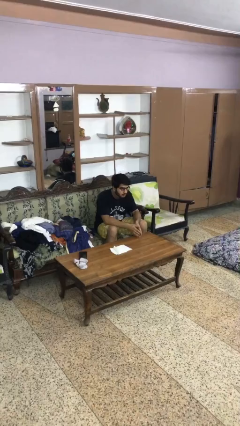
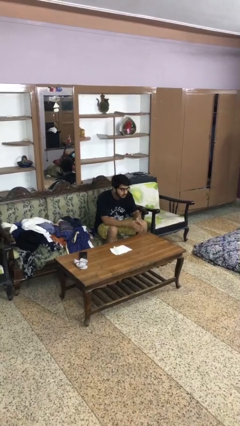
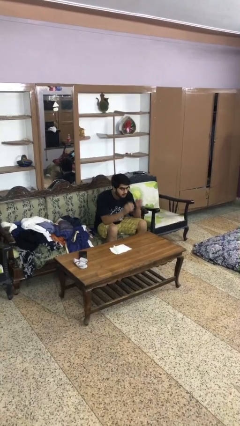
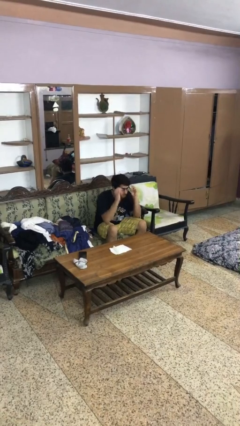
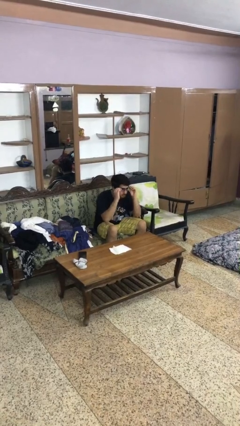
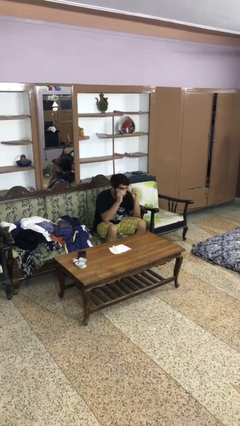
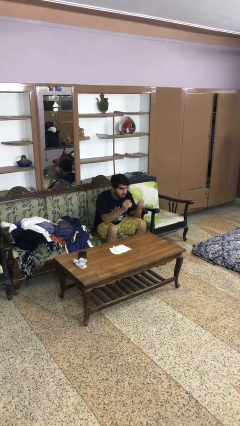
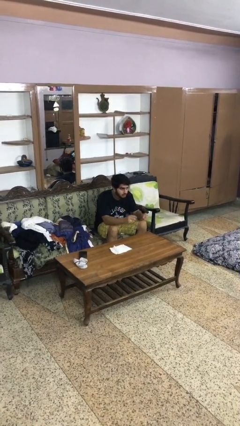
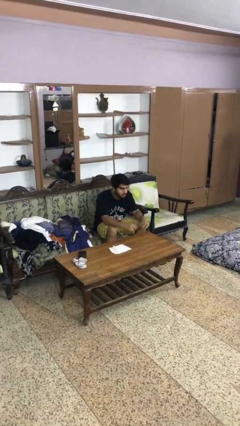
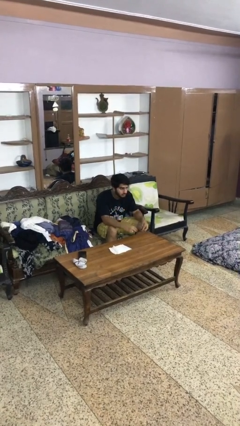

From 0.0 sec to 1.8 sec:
person takes off glasses

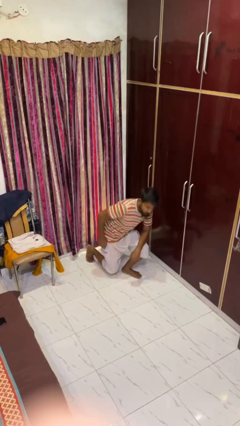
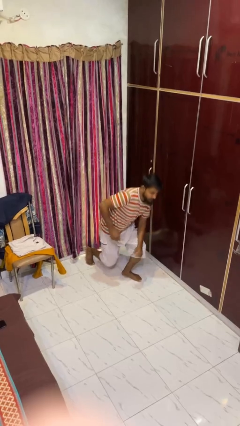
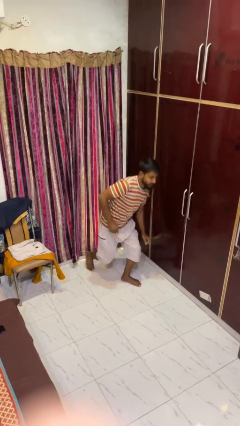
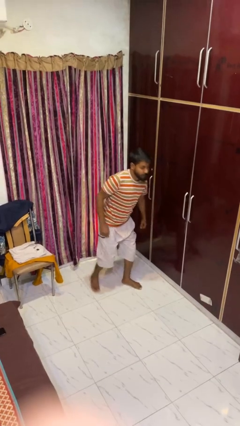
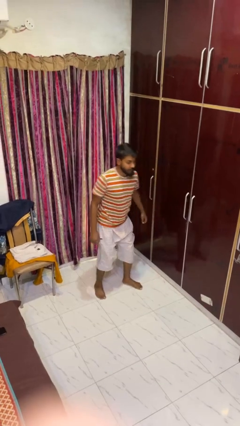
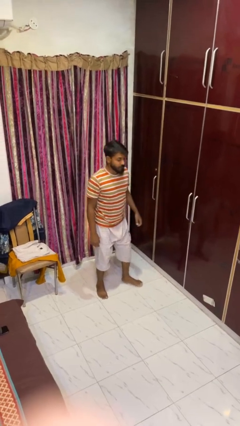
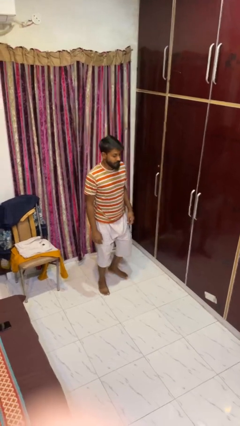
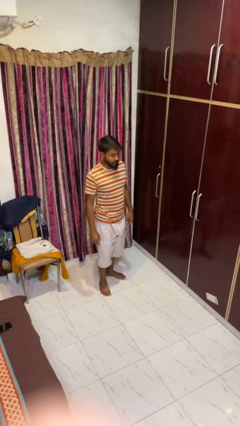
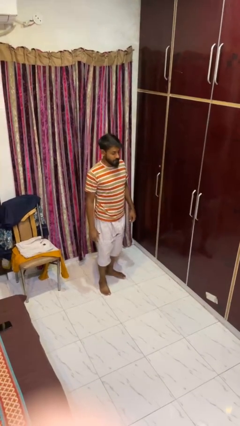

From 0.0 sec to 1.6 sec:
person stands up from floor

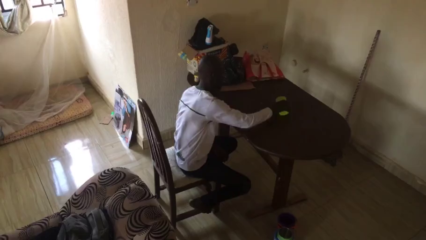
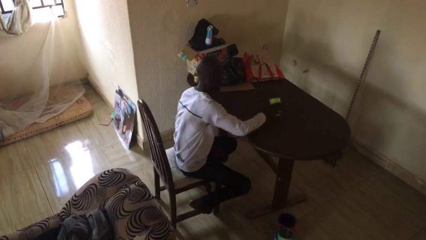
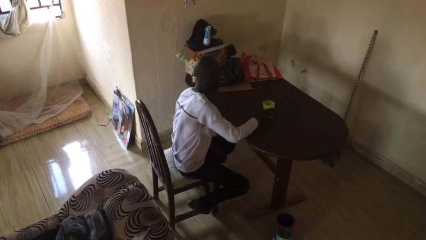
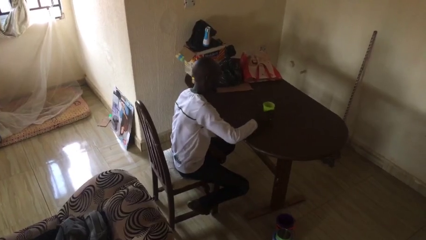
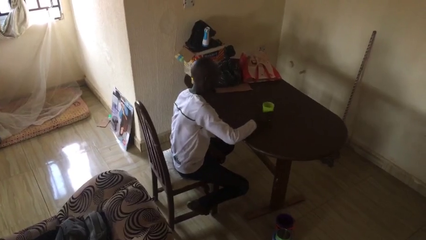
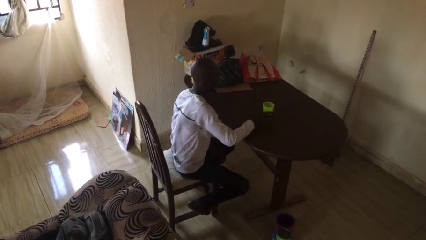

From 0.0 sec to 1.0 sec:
person sets upright glass

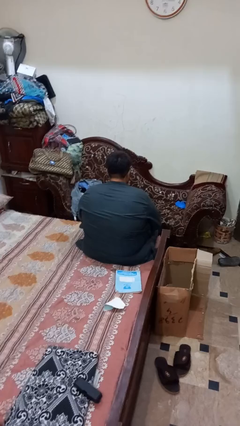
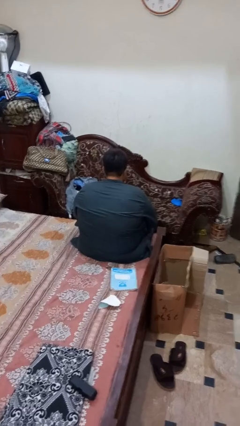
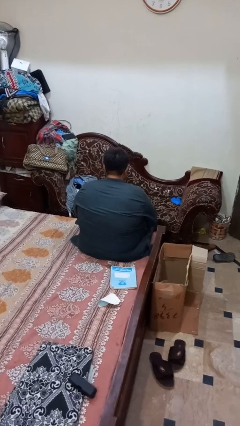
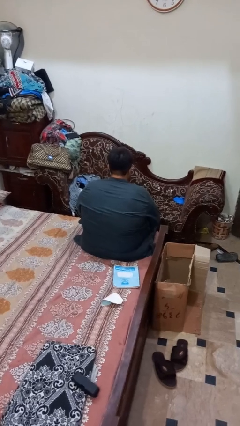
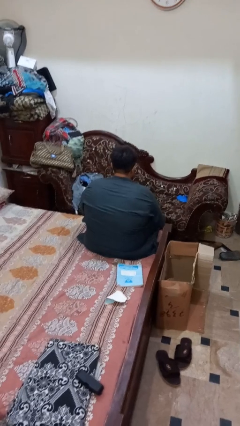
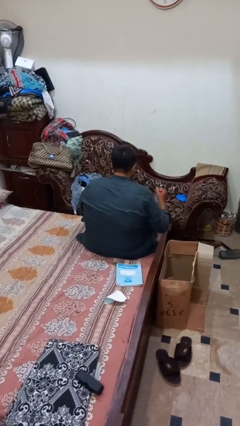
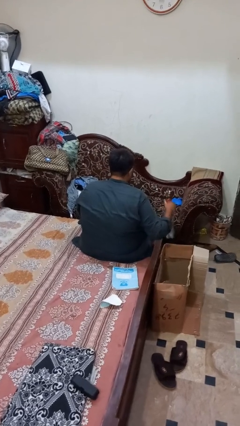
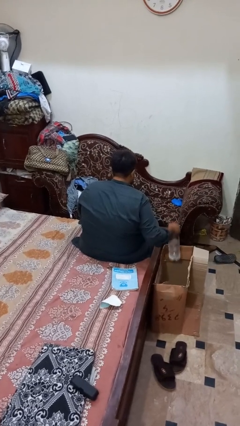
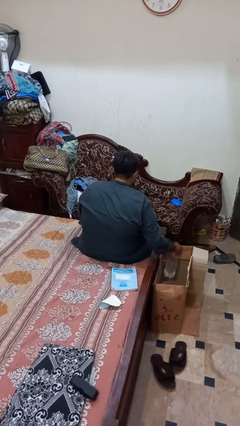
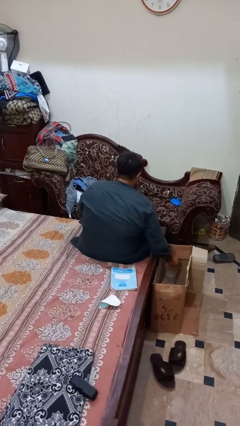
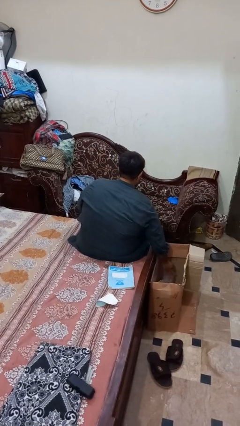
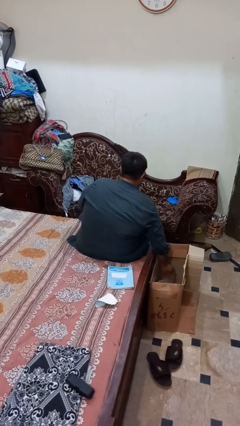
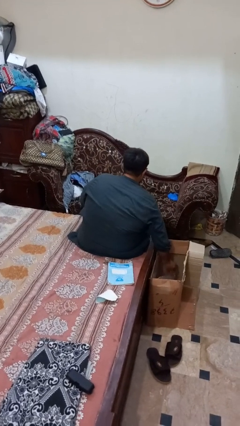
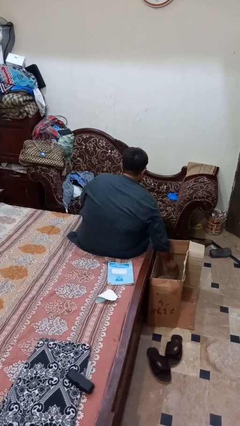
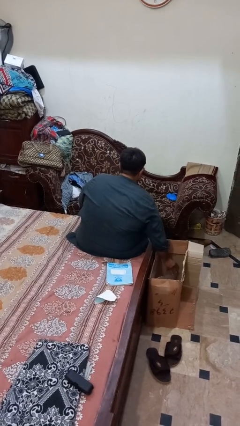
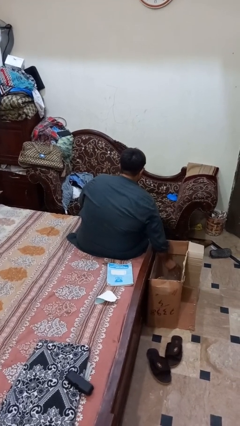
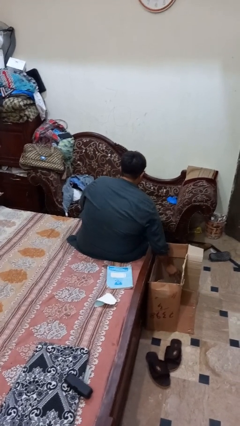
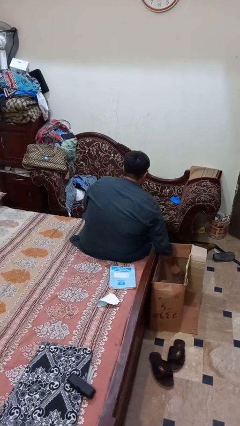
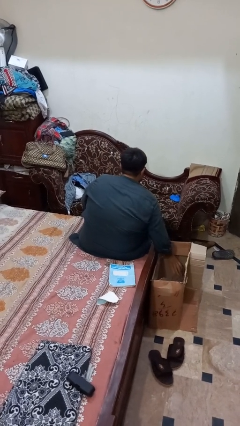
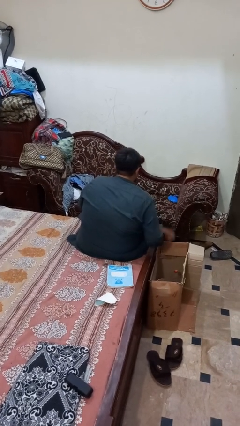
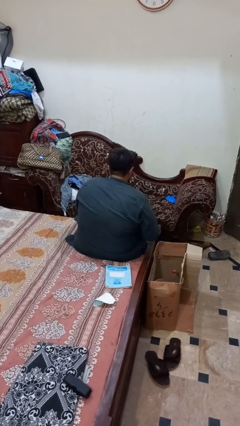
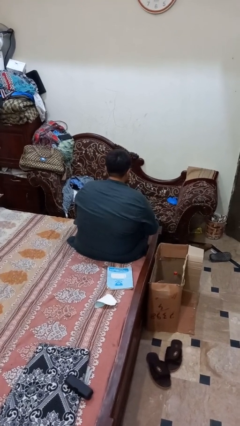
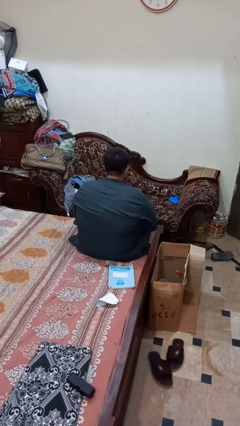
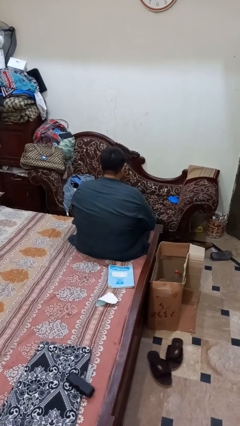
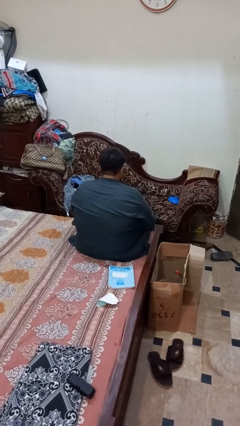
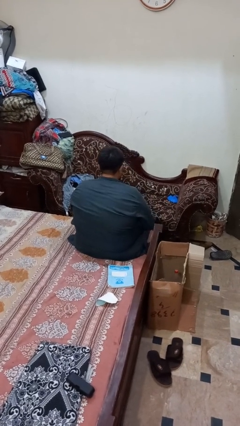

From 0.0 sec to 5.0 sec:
person puts object into box

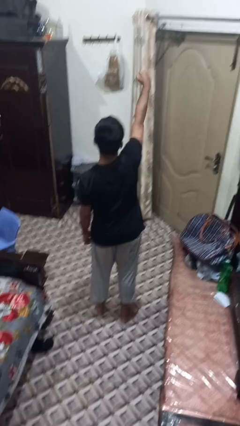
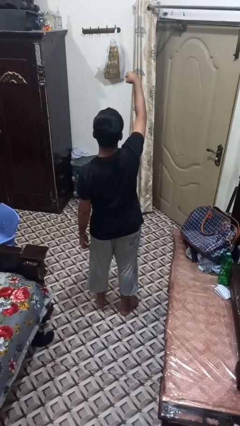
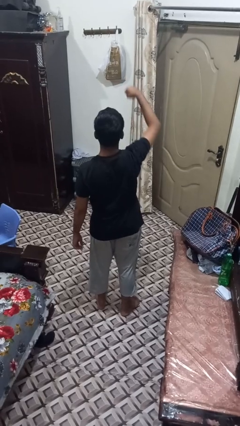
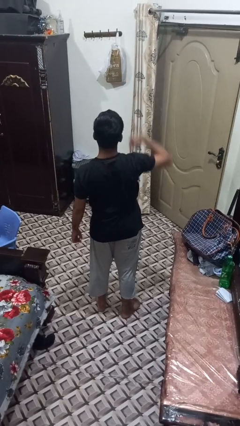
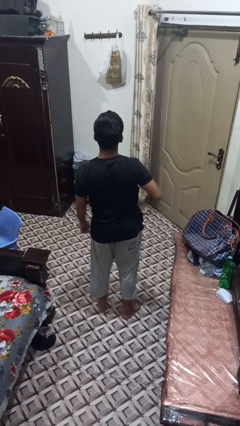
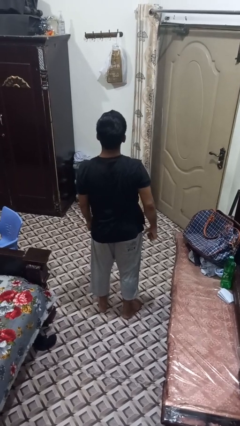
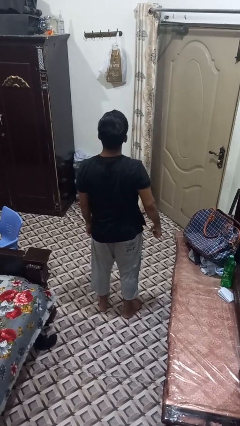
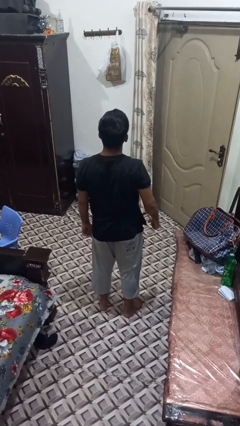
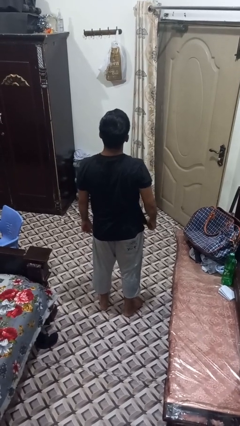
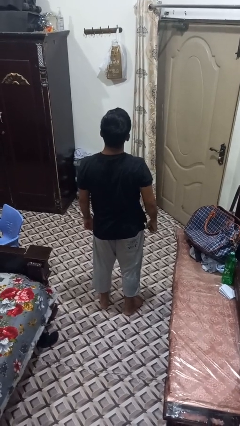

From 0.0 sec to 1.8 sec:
person punches

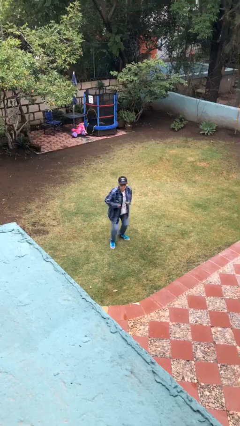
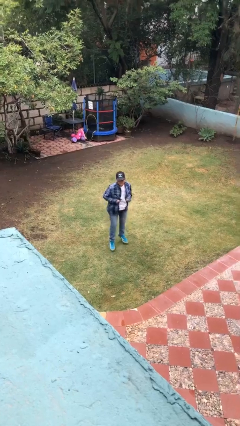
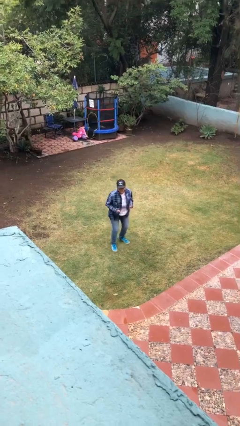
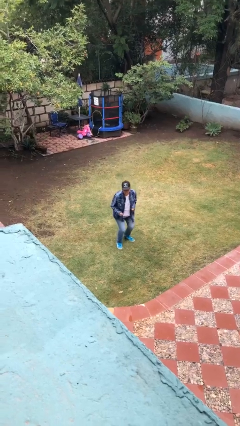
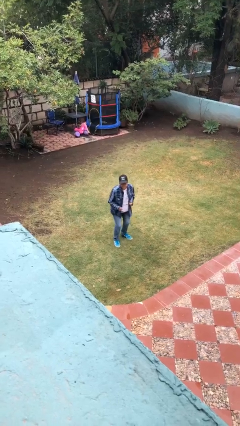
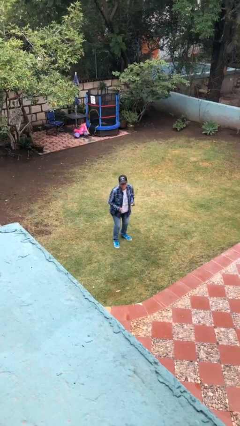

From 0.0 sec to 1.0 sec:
person jumps

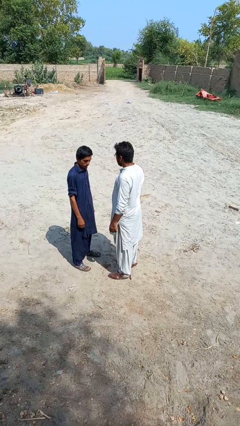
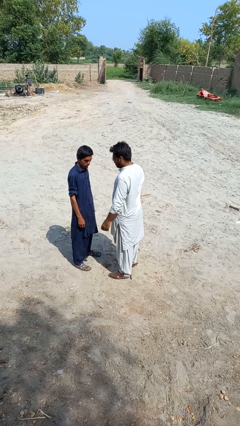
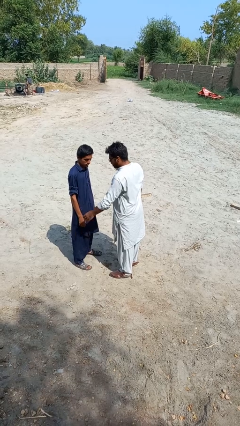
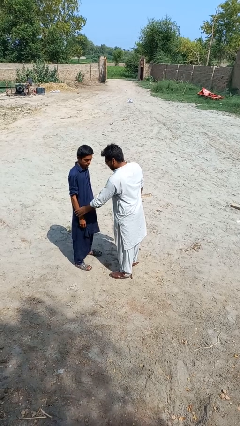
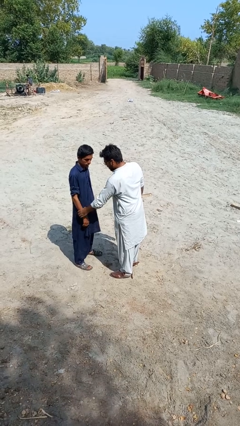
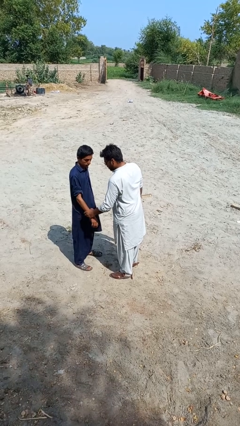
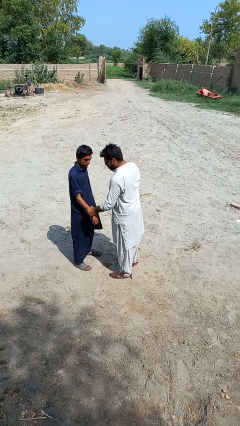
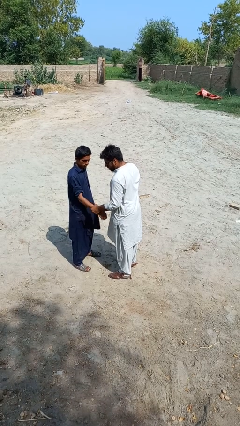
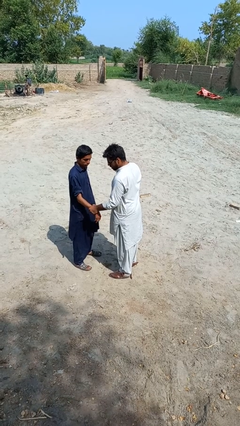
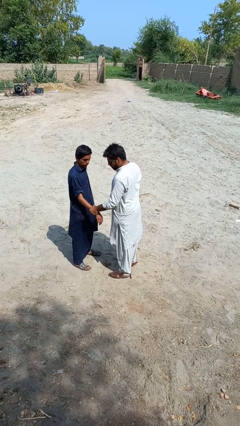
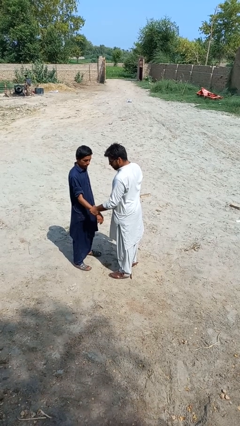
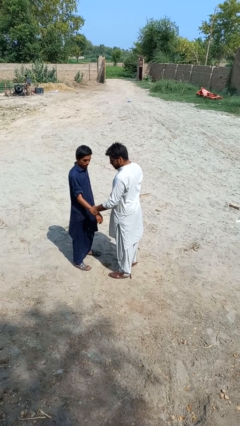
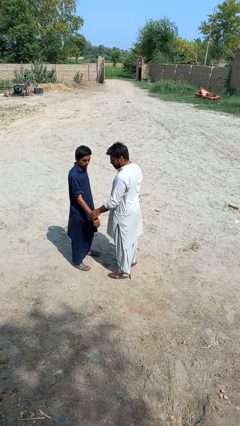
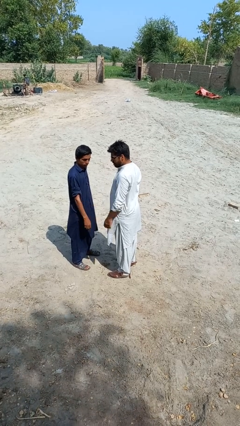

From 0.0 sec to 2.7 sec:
person grabs person by forearm

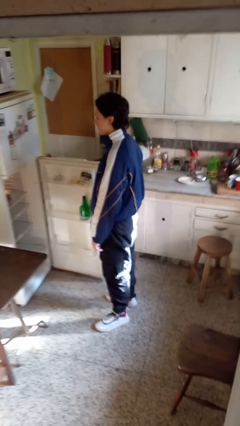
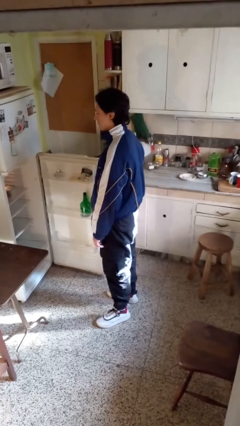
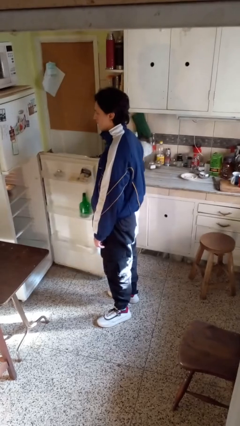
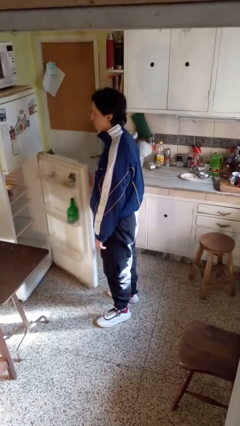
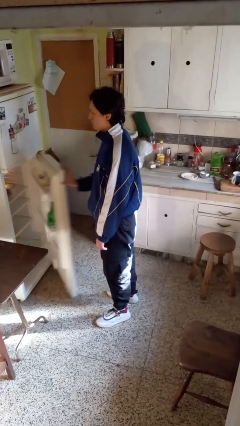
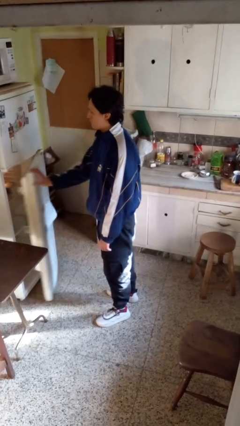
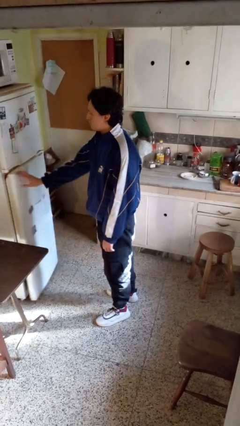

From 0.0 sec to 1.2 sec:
person closes refrigerator

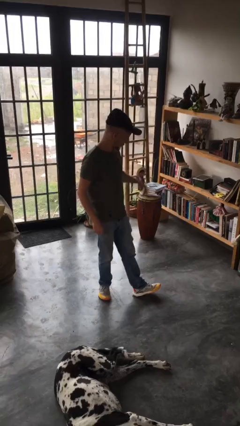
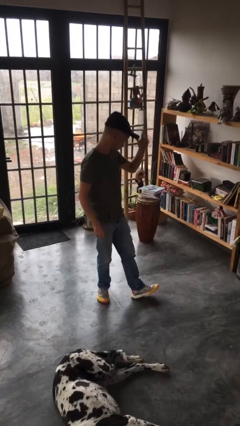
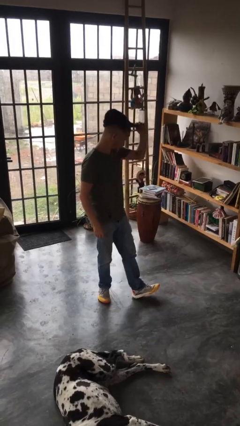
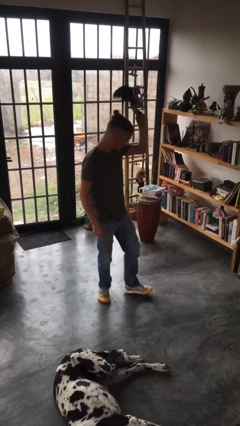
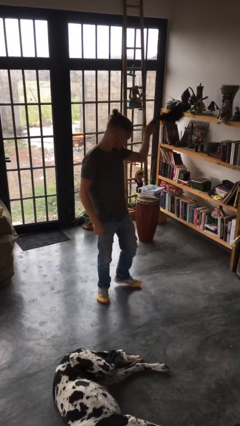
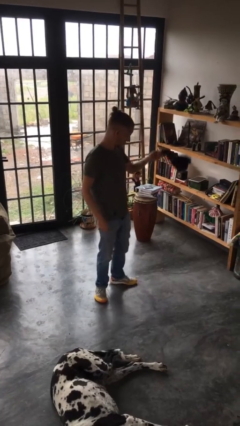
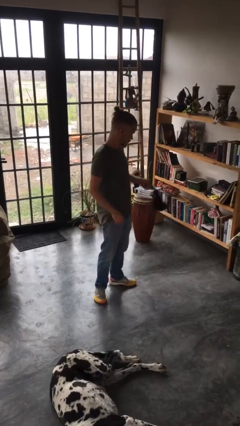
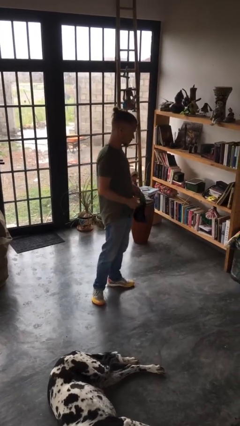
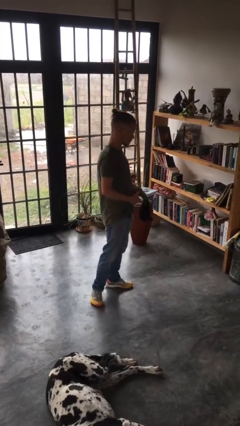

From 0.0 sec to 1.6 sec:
person takes off hat
